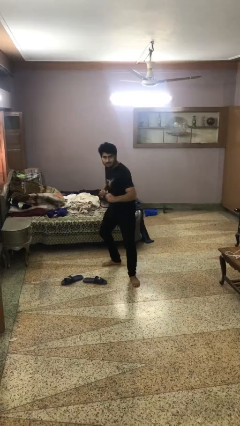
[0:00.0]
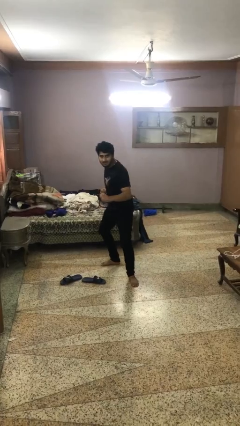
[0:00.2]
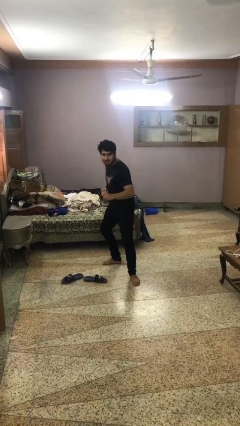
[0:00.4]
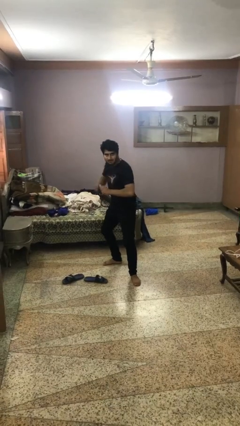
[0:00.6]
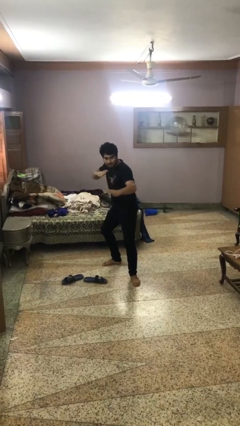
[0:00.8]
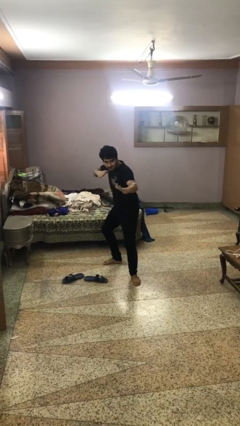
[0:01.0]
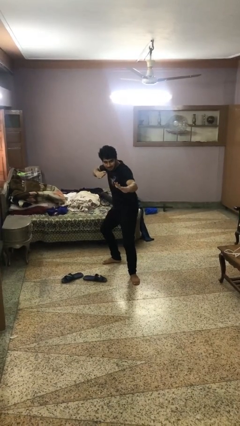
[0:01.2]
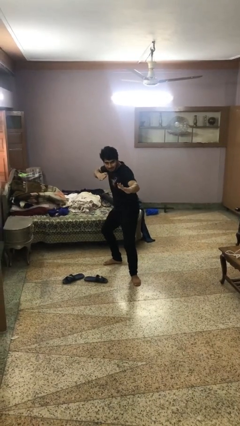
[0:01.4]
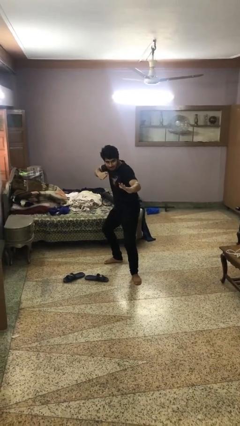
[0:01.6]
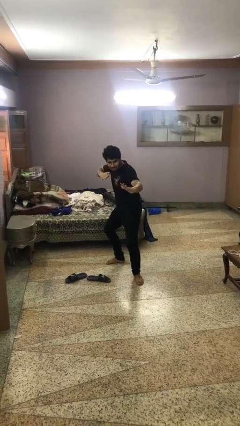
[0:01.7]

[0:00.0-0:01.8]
person karate chop

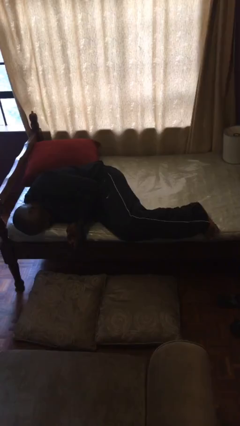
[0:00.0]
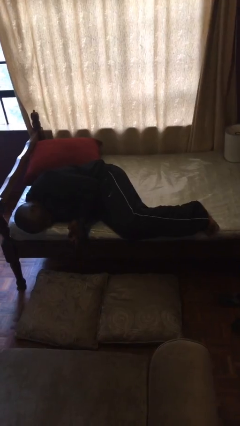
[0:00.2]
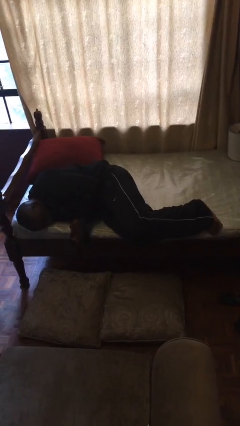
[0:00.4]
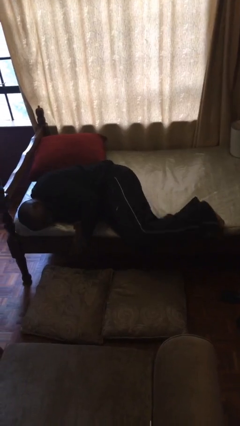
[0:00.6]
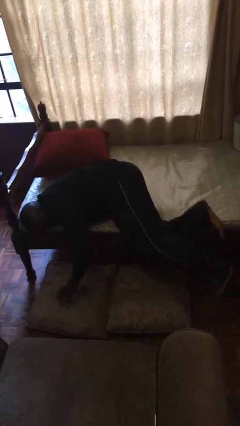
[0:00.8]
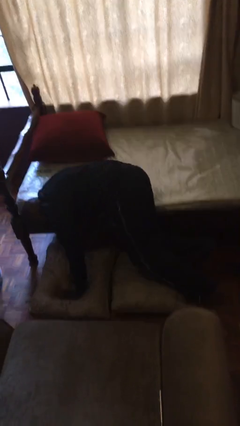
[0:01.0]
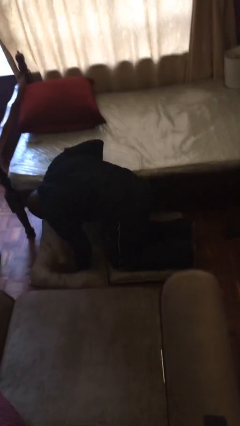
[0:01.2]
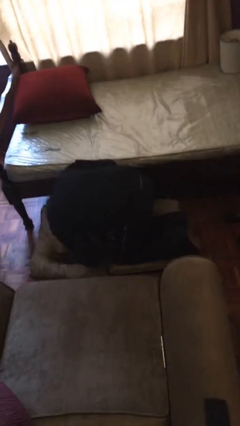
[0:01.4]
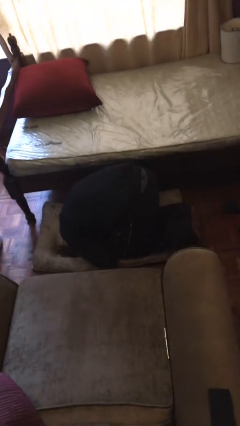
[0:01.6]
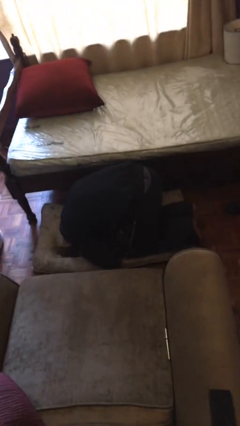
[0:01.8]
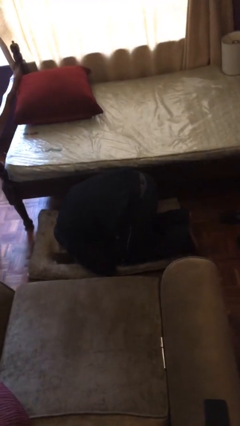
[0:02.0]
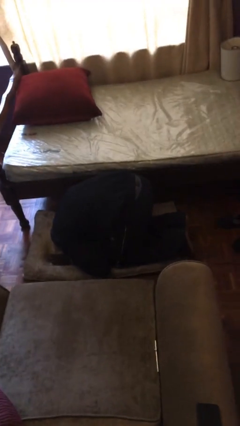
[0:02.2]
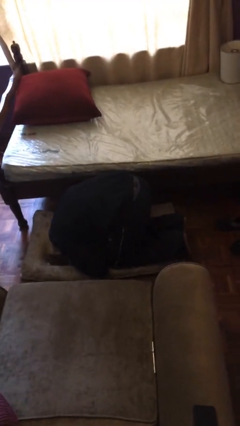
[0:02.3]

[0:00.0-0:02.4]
person falls from bed

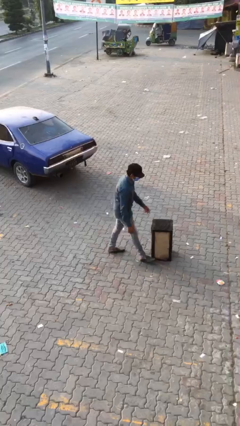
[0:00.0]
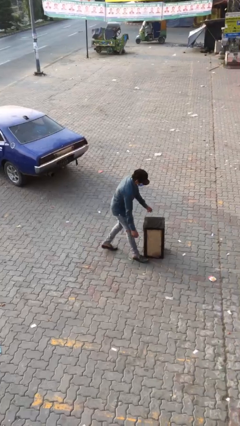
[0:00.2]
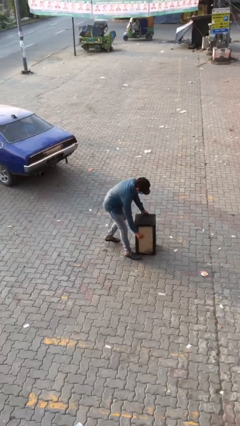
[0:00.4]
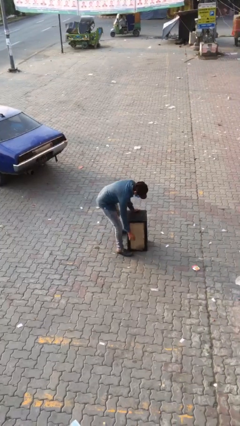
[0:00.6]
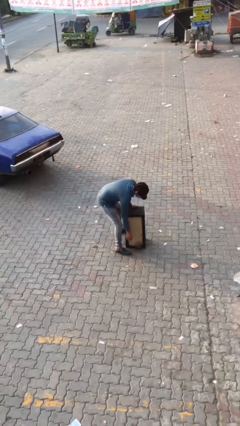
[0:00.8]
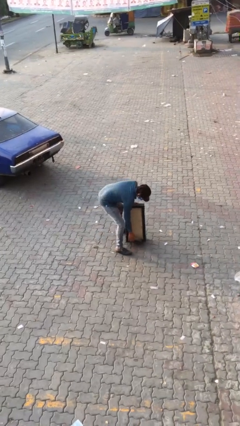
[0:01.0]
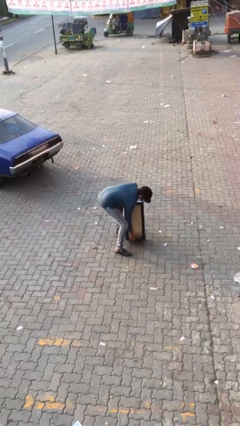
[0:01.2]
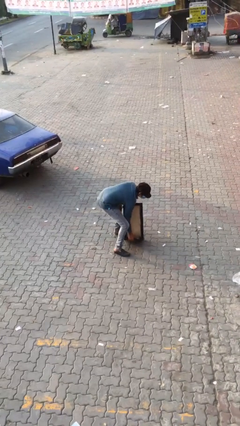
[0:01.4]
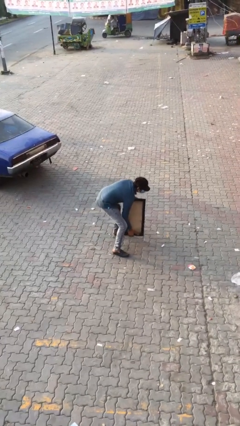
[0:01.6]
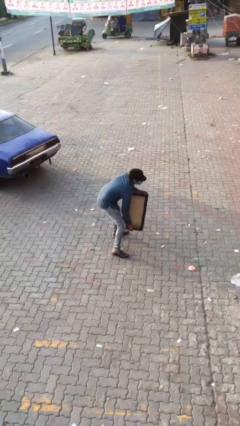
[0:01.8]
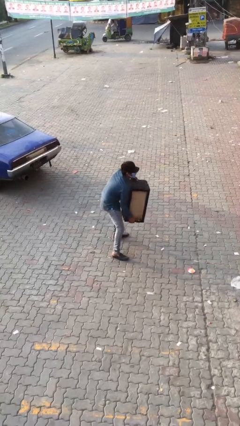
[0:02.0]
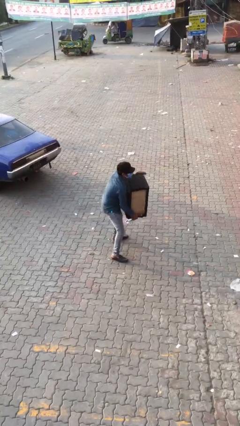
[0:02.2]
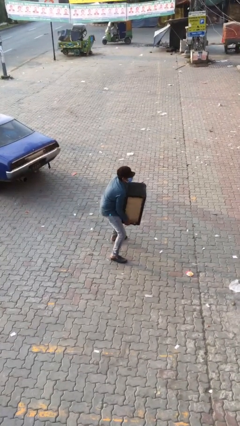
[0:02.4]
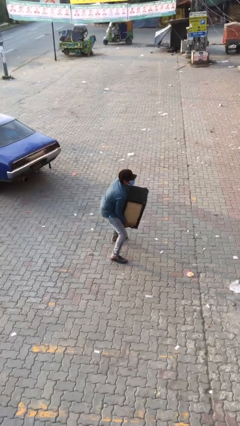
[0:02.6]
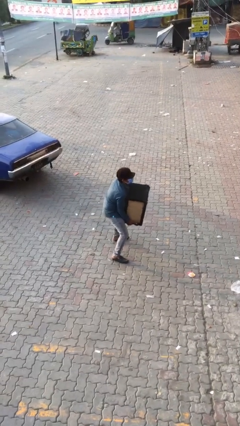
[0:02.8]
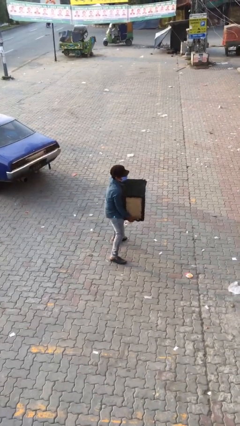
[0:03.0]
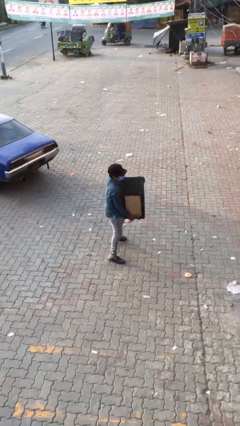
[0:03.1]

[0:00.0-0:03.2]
person picks up object from floor

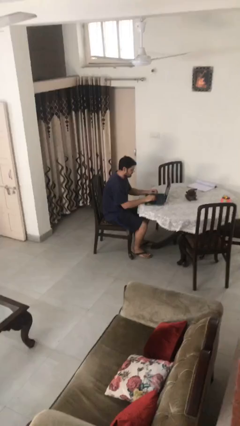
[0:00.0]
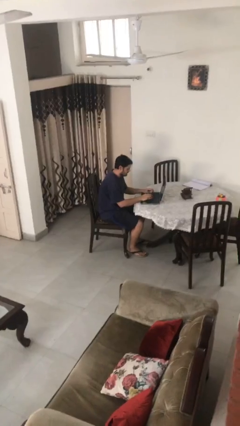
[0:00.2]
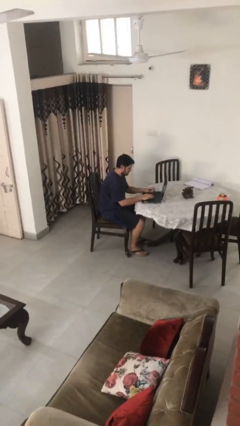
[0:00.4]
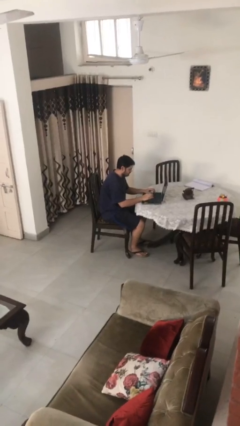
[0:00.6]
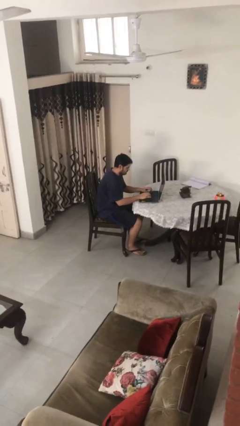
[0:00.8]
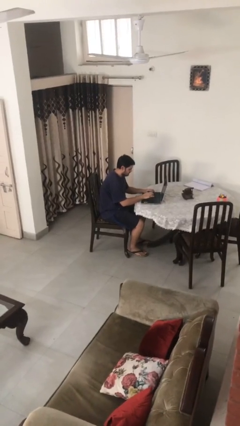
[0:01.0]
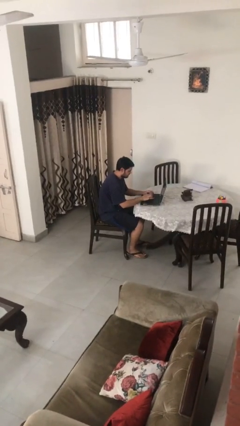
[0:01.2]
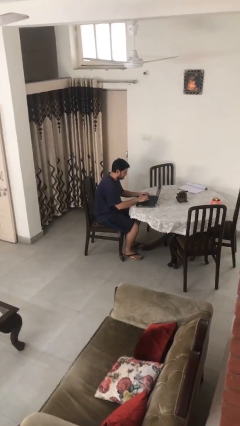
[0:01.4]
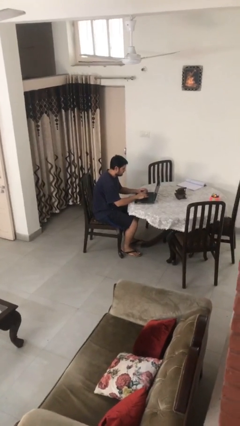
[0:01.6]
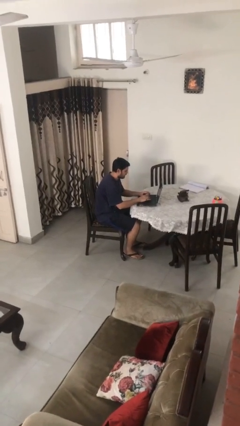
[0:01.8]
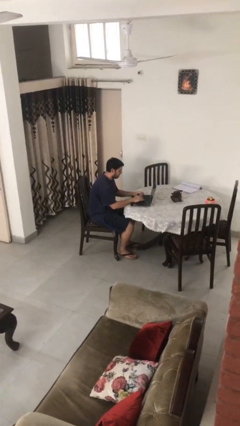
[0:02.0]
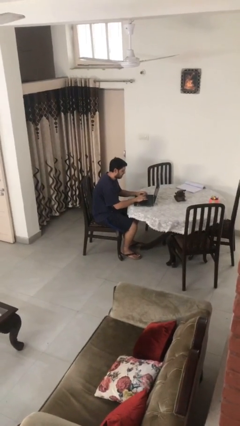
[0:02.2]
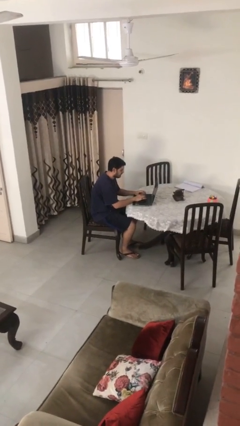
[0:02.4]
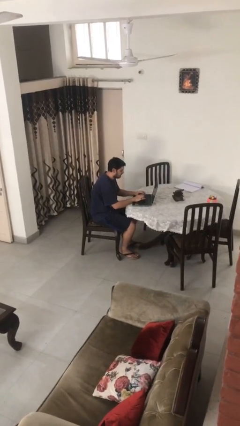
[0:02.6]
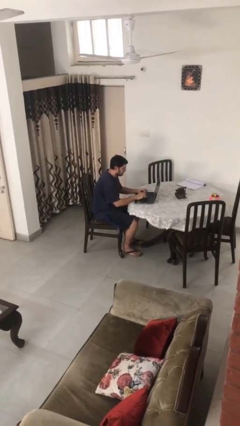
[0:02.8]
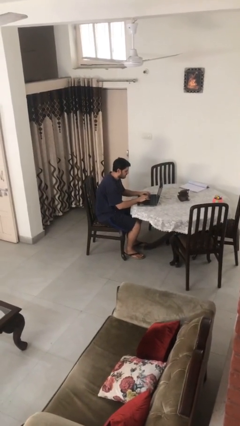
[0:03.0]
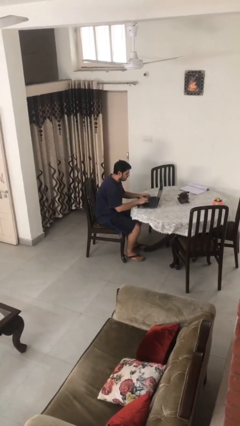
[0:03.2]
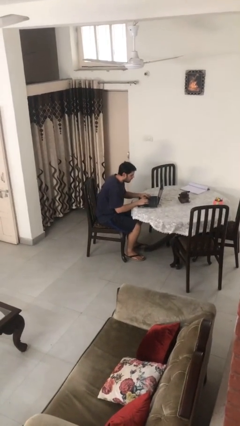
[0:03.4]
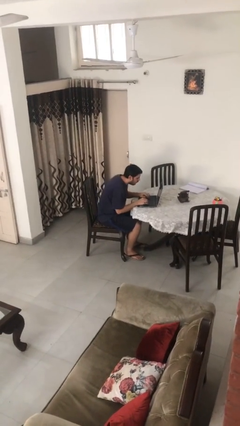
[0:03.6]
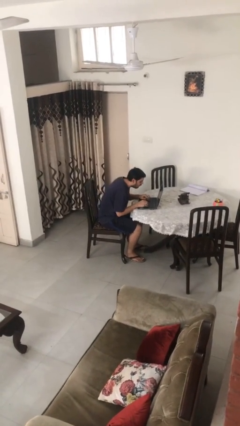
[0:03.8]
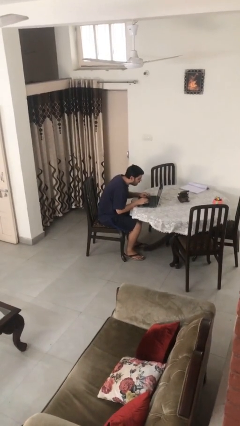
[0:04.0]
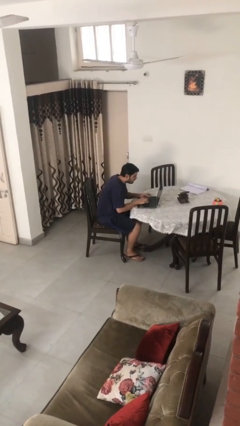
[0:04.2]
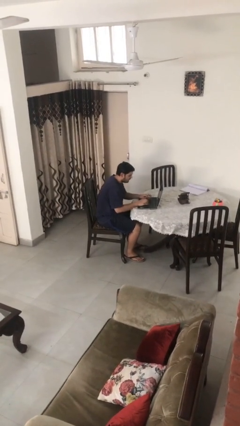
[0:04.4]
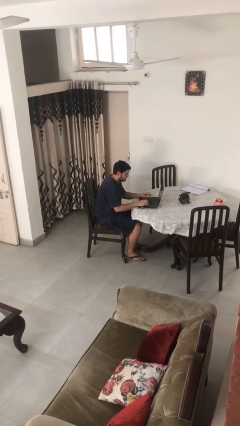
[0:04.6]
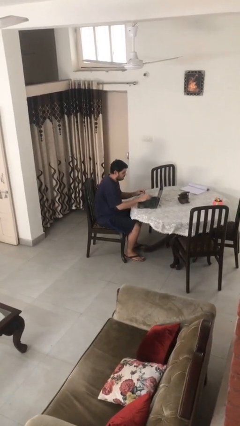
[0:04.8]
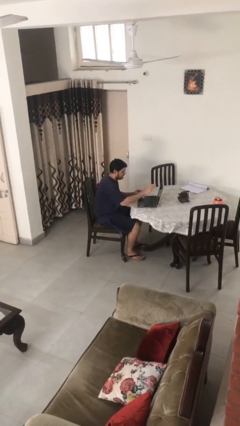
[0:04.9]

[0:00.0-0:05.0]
person interacts with laptop

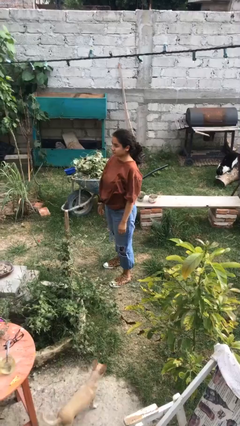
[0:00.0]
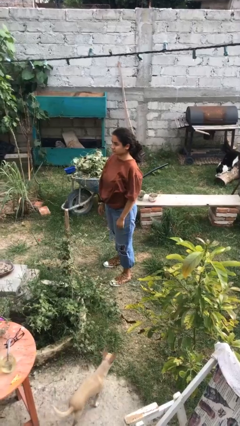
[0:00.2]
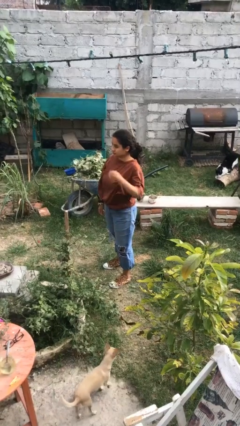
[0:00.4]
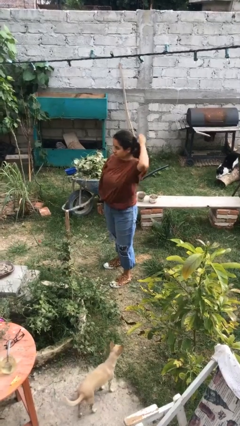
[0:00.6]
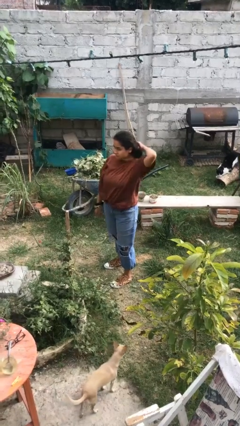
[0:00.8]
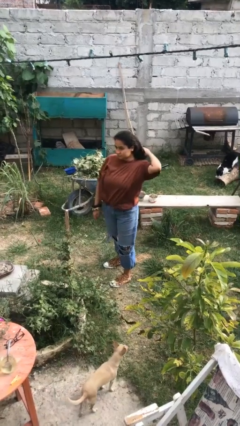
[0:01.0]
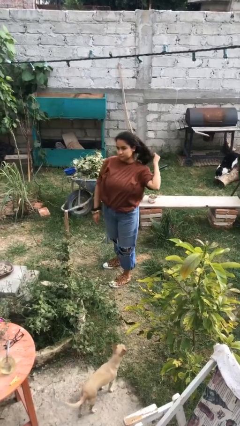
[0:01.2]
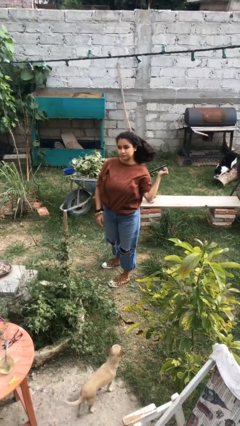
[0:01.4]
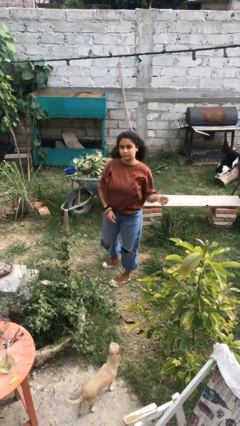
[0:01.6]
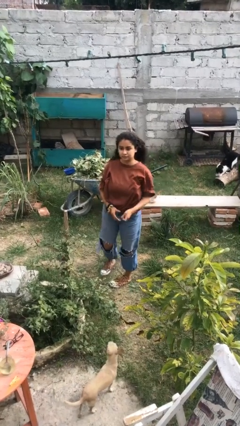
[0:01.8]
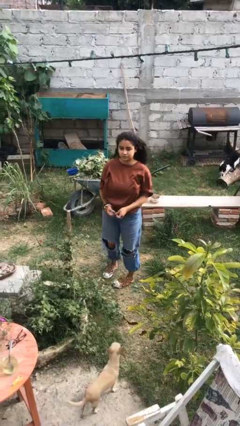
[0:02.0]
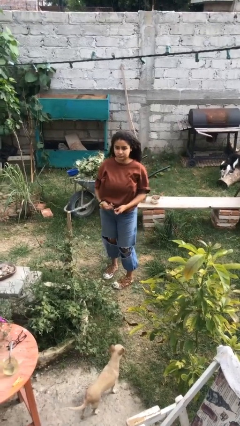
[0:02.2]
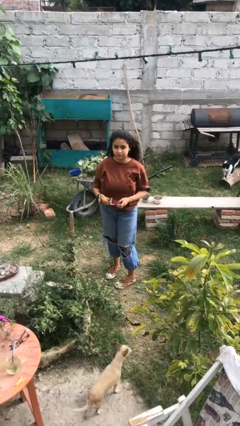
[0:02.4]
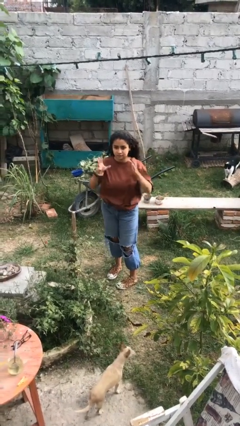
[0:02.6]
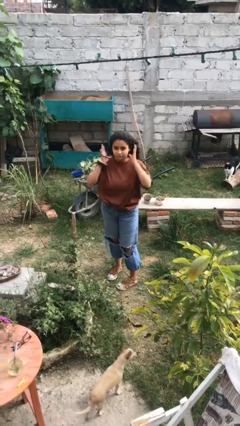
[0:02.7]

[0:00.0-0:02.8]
person takes off hairtie

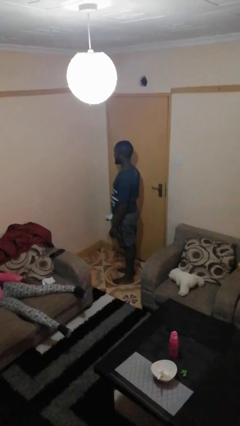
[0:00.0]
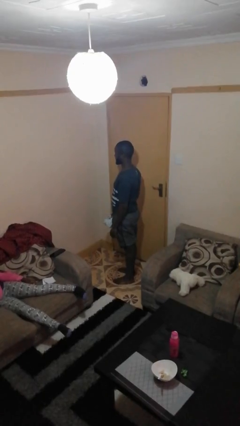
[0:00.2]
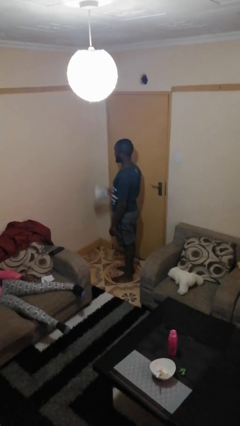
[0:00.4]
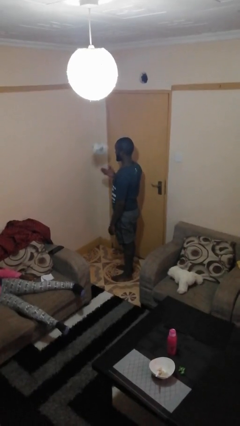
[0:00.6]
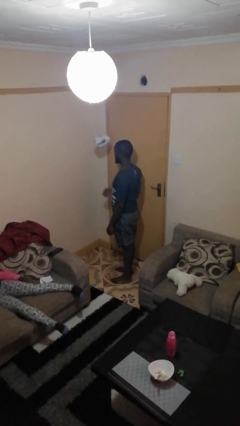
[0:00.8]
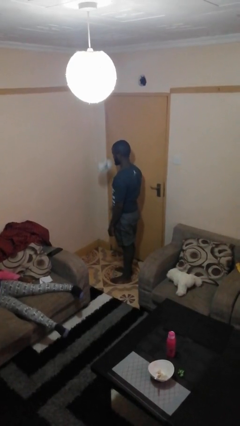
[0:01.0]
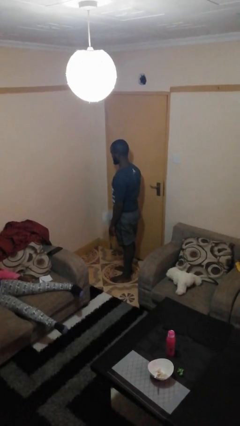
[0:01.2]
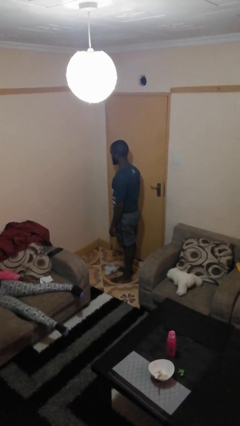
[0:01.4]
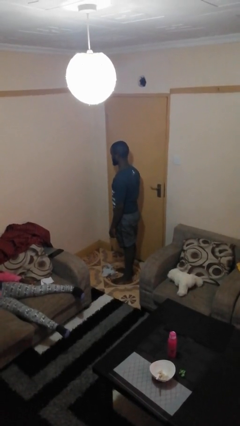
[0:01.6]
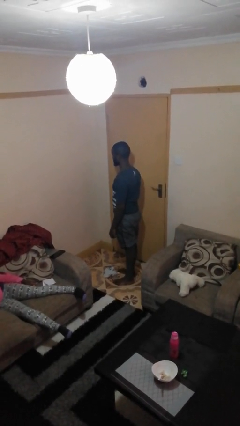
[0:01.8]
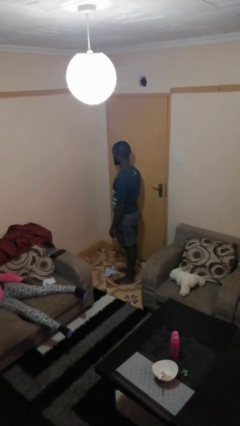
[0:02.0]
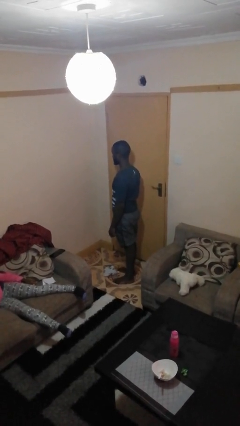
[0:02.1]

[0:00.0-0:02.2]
person throws object into air
